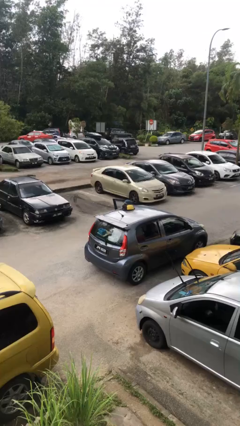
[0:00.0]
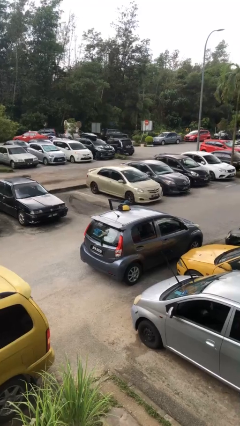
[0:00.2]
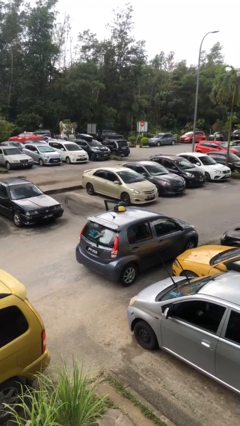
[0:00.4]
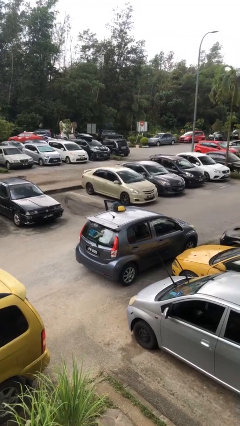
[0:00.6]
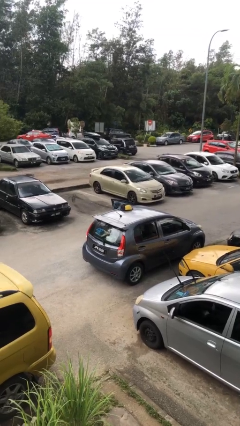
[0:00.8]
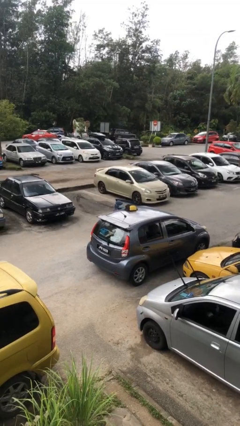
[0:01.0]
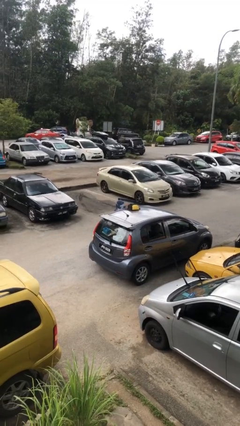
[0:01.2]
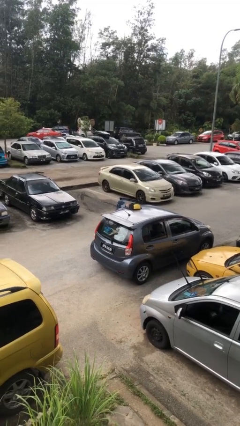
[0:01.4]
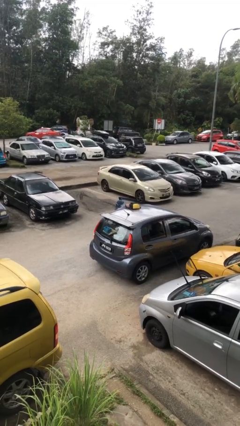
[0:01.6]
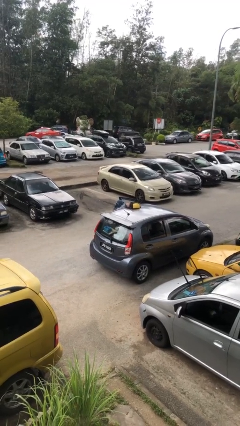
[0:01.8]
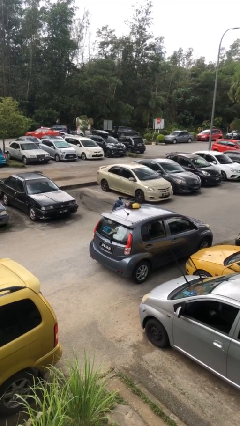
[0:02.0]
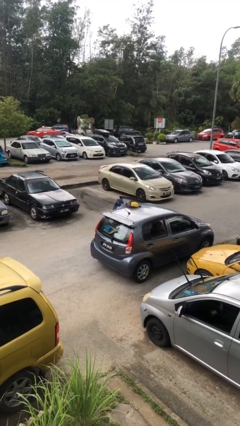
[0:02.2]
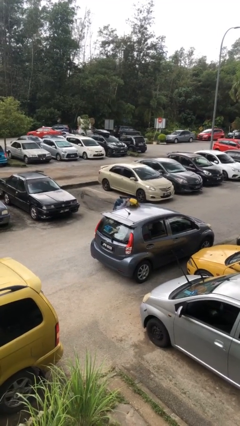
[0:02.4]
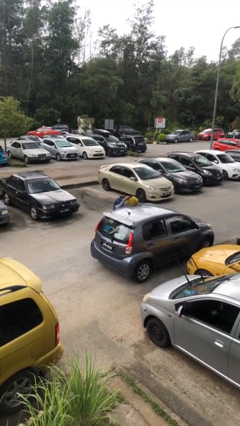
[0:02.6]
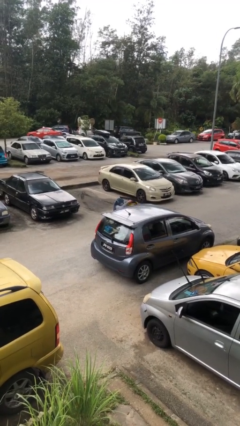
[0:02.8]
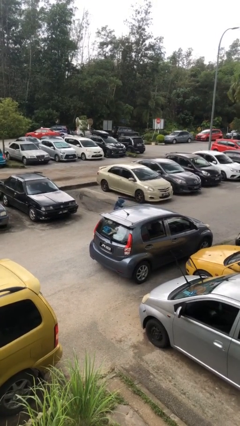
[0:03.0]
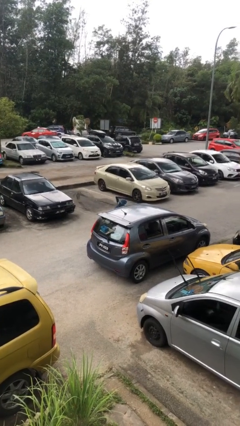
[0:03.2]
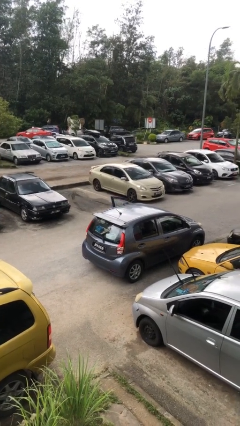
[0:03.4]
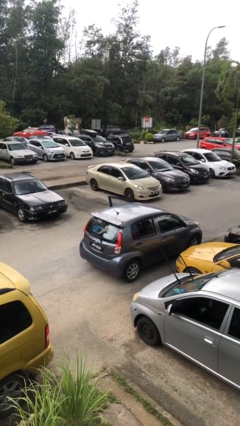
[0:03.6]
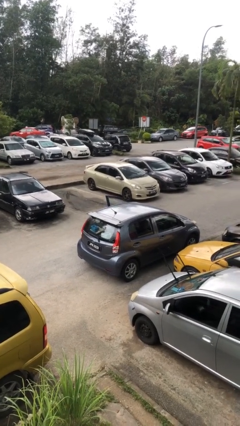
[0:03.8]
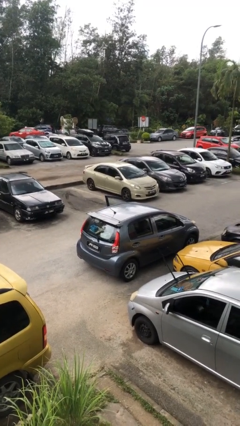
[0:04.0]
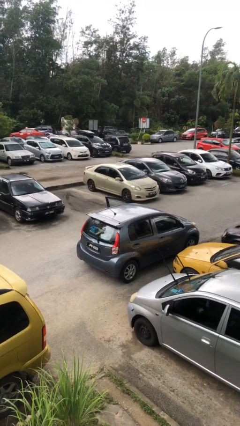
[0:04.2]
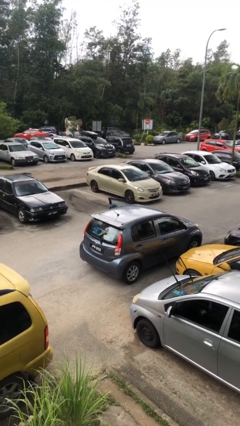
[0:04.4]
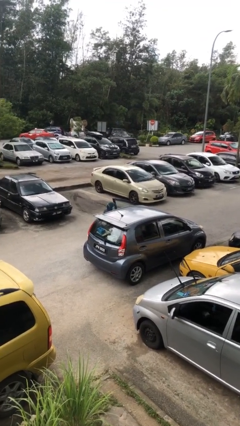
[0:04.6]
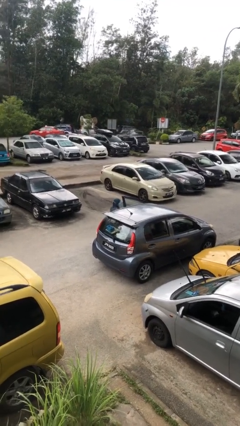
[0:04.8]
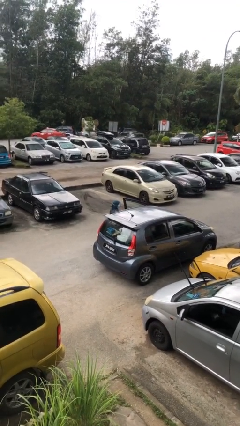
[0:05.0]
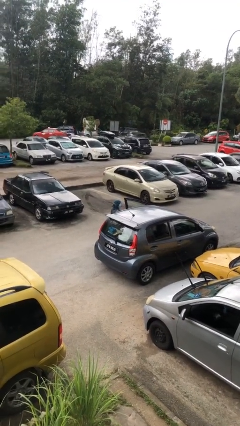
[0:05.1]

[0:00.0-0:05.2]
person loads car

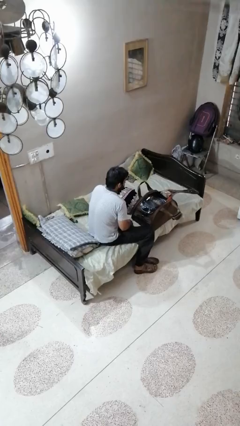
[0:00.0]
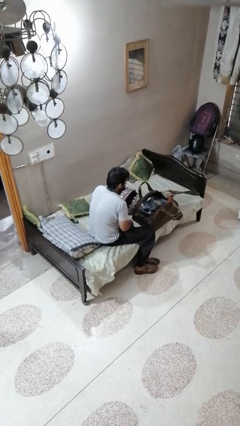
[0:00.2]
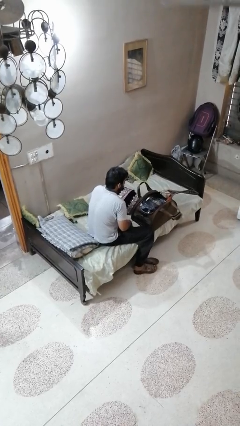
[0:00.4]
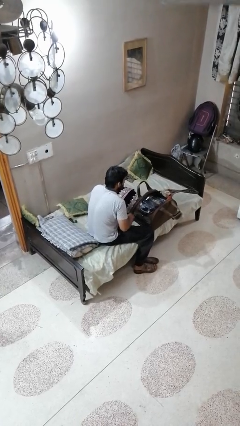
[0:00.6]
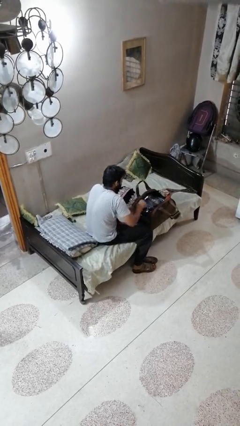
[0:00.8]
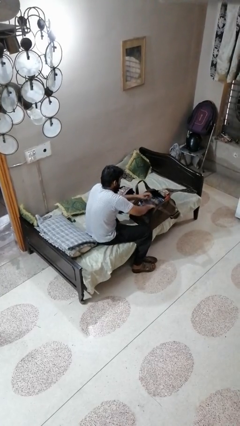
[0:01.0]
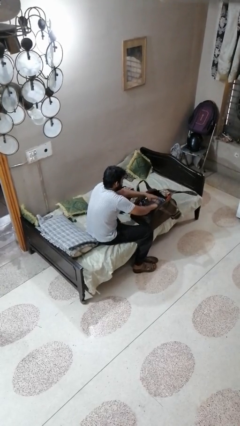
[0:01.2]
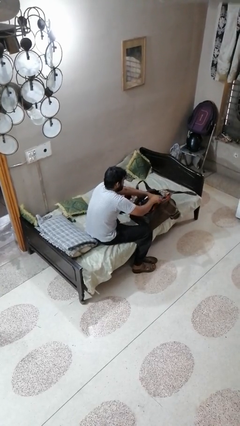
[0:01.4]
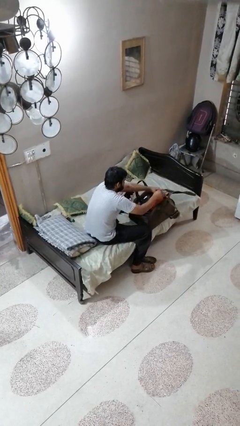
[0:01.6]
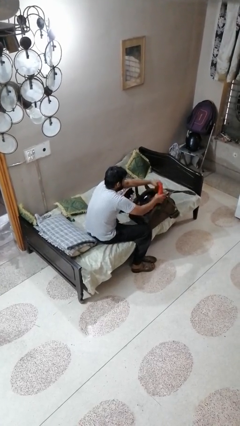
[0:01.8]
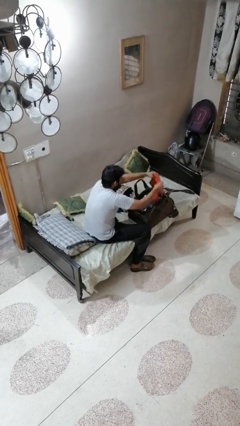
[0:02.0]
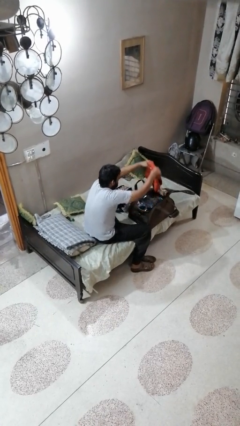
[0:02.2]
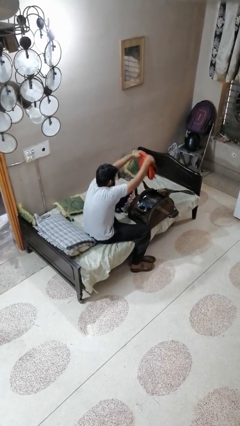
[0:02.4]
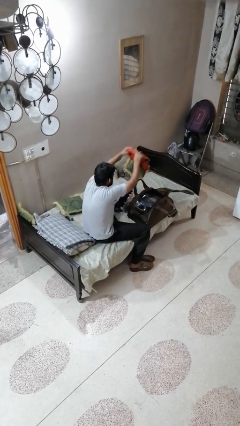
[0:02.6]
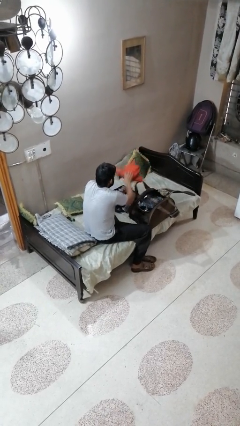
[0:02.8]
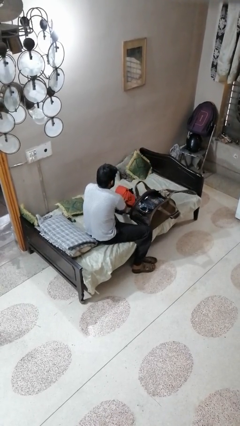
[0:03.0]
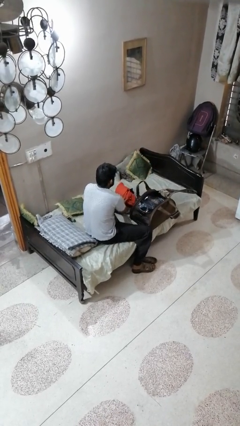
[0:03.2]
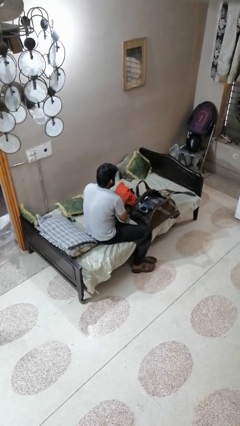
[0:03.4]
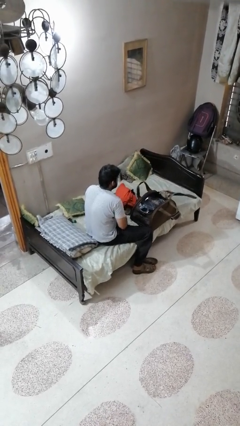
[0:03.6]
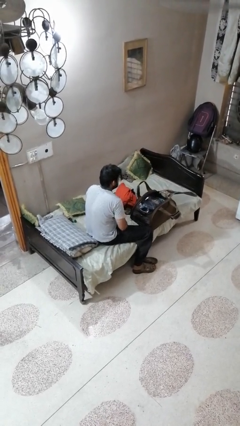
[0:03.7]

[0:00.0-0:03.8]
person unloads clothes from suitcase

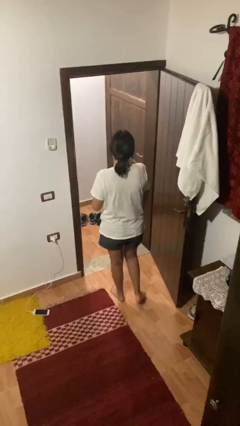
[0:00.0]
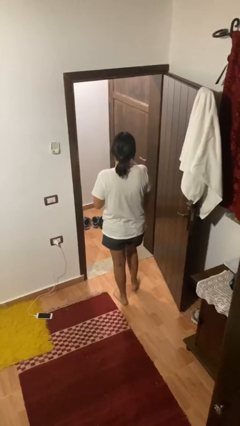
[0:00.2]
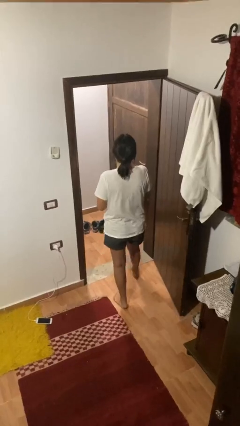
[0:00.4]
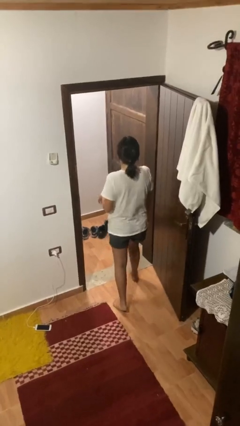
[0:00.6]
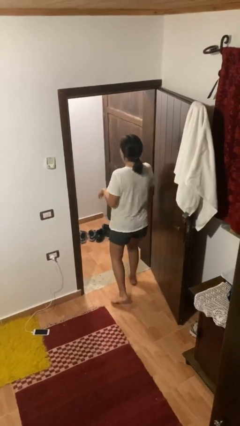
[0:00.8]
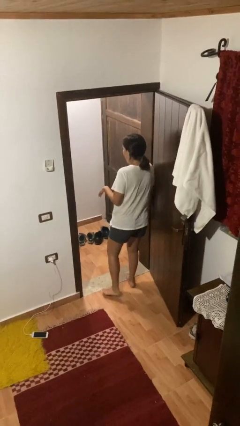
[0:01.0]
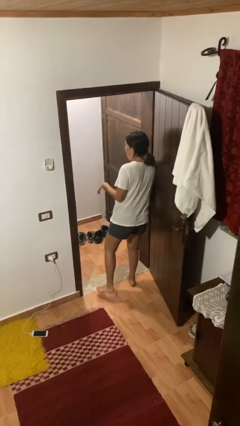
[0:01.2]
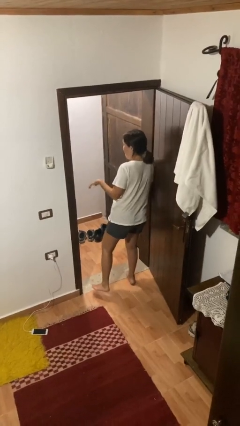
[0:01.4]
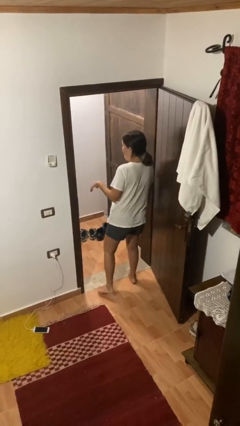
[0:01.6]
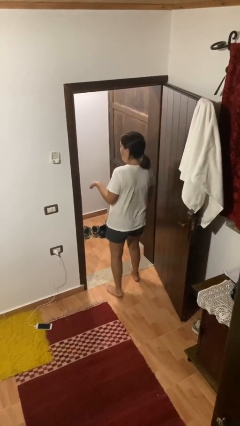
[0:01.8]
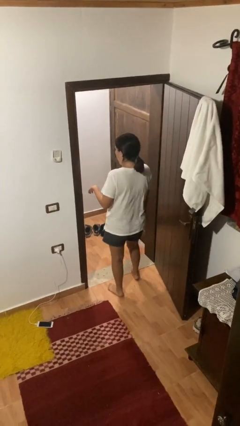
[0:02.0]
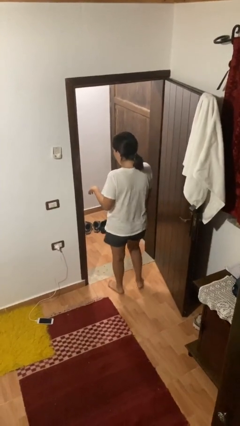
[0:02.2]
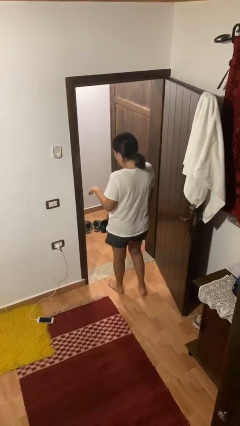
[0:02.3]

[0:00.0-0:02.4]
person bumps into wall

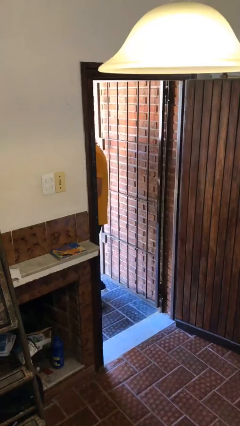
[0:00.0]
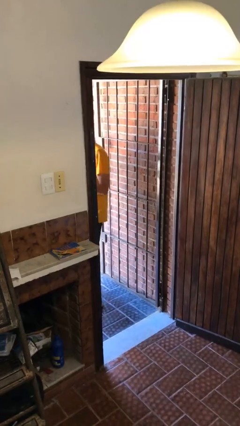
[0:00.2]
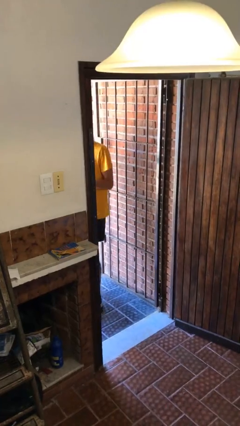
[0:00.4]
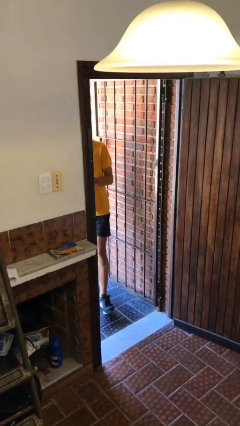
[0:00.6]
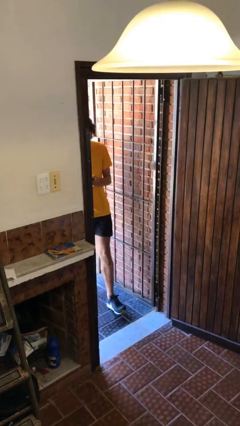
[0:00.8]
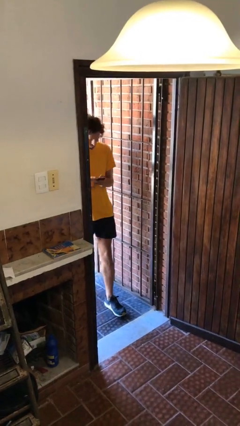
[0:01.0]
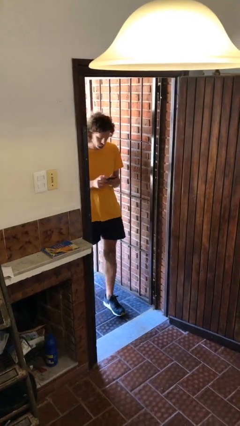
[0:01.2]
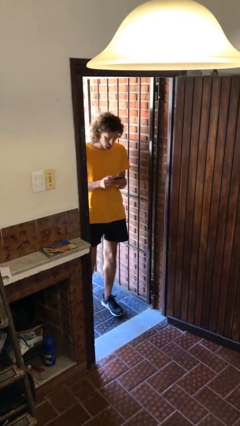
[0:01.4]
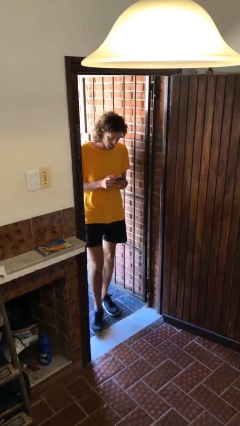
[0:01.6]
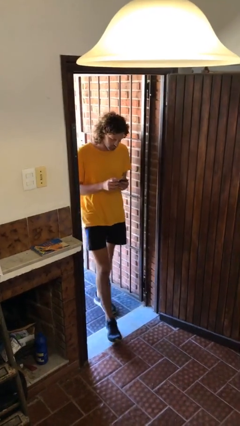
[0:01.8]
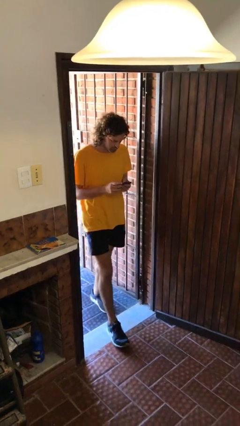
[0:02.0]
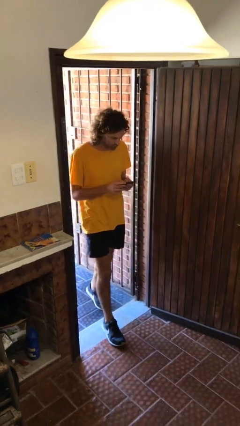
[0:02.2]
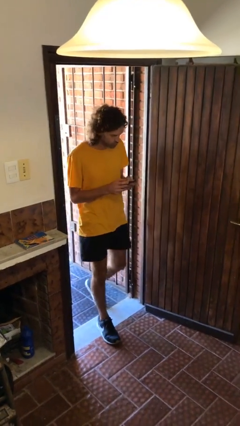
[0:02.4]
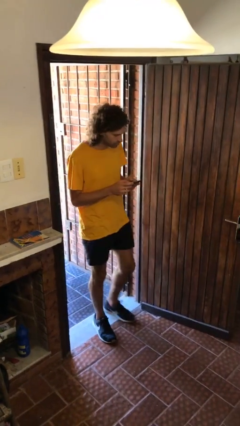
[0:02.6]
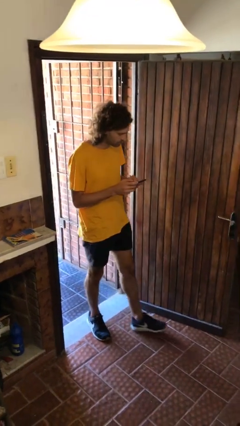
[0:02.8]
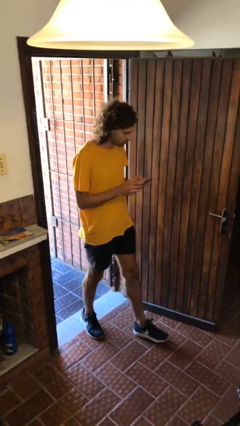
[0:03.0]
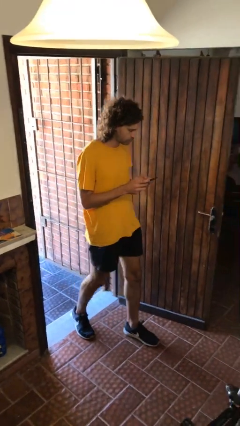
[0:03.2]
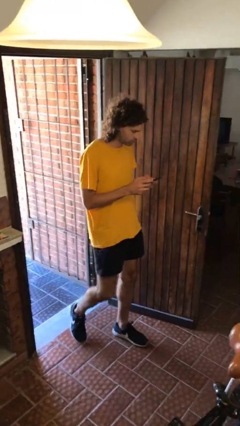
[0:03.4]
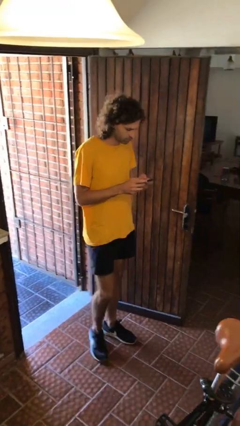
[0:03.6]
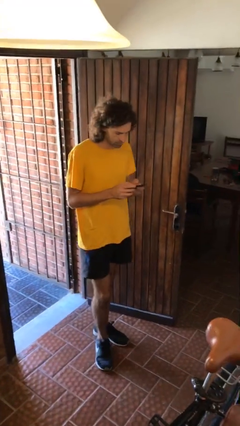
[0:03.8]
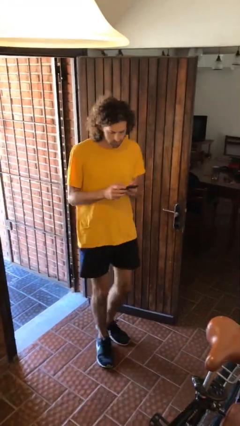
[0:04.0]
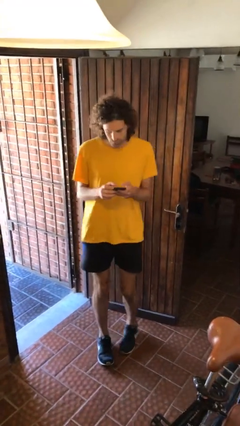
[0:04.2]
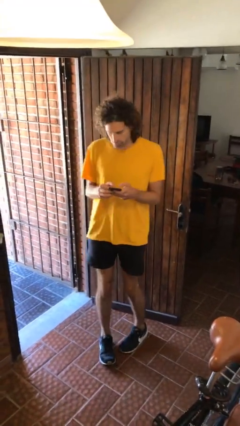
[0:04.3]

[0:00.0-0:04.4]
person enters scene through structure

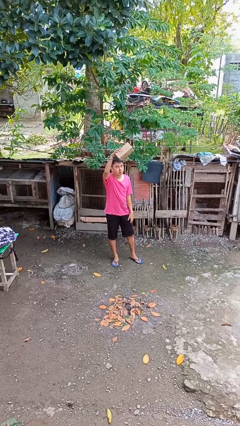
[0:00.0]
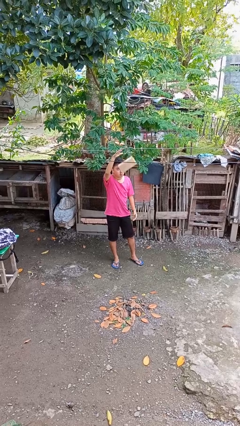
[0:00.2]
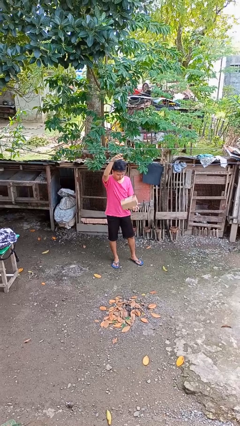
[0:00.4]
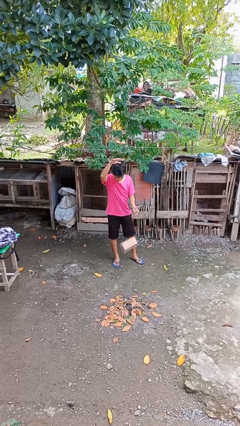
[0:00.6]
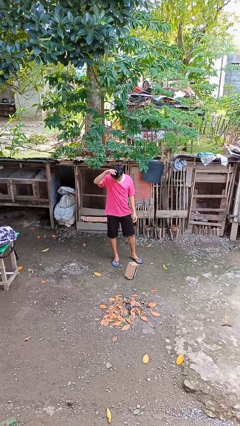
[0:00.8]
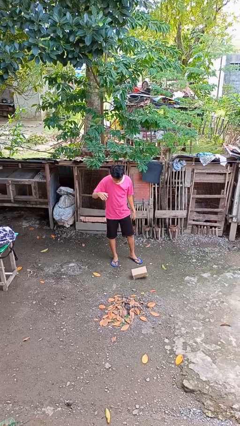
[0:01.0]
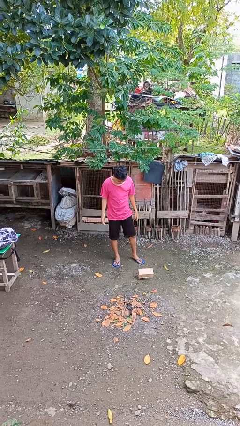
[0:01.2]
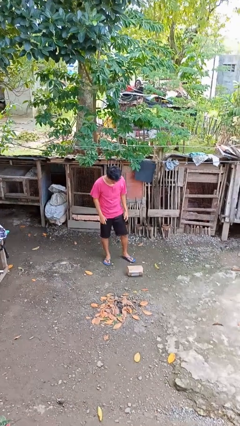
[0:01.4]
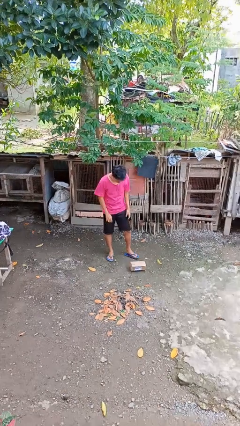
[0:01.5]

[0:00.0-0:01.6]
person drops object

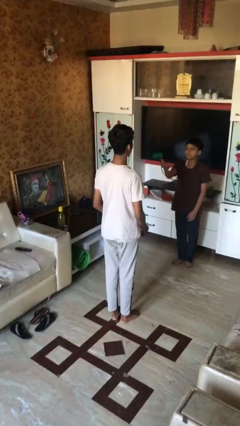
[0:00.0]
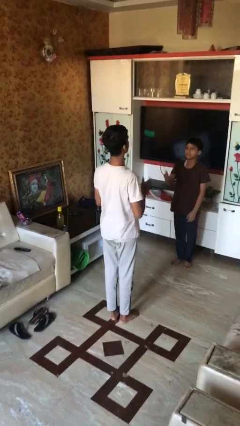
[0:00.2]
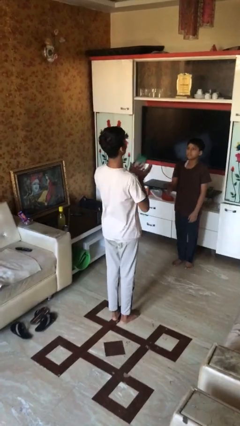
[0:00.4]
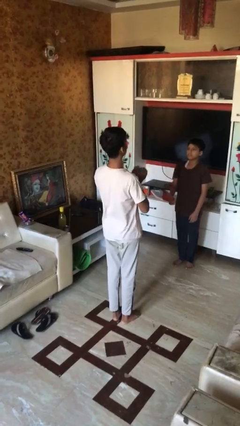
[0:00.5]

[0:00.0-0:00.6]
person catches object from person
